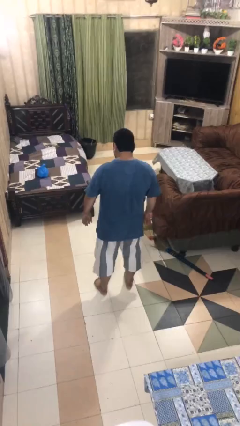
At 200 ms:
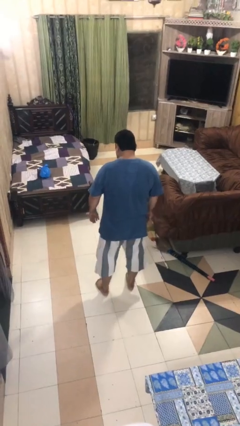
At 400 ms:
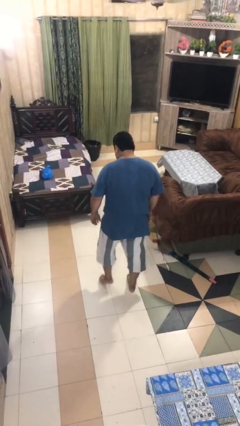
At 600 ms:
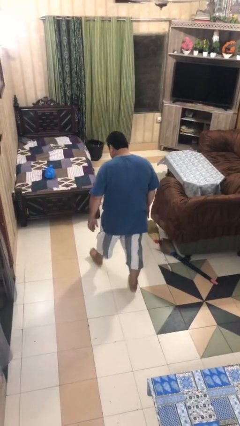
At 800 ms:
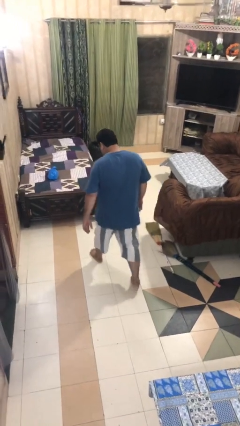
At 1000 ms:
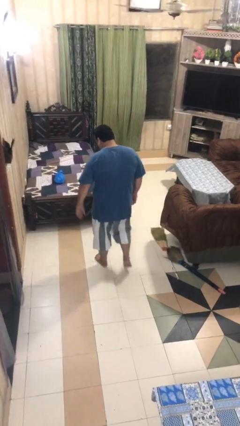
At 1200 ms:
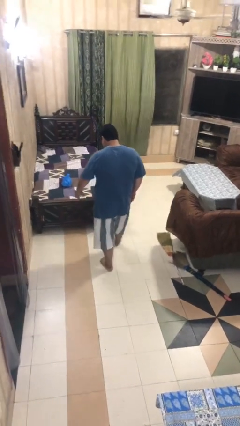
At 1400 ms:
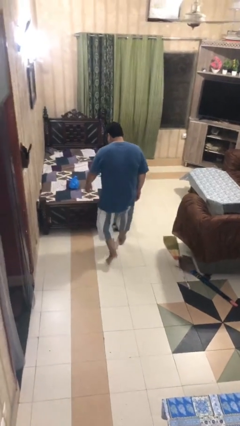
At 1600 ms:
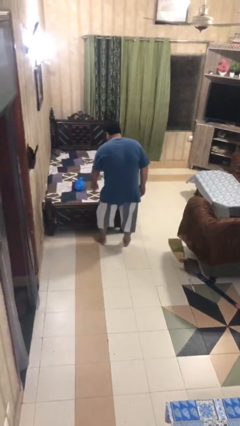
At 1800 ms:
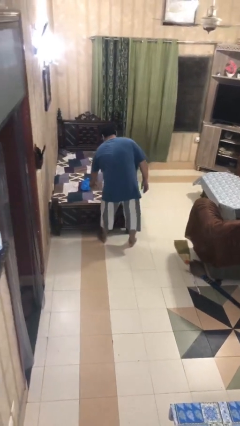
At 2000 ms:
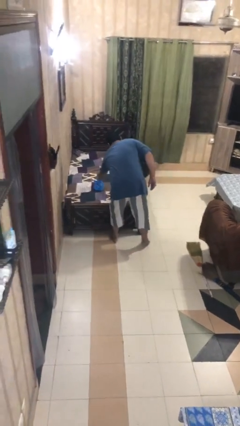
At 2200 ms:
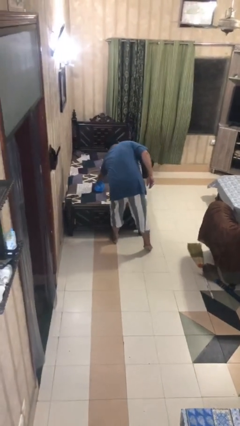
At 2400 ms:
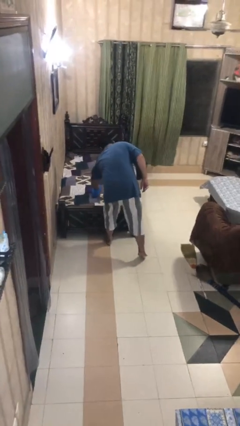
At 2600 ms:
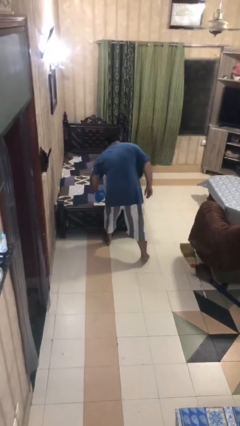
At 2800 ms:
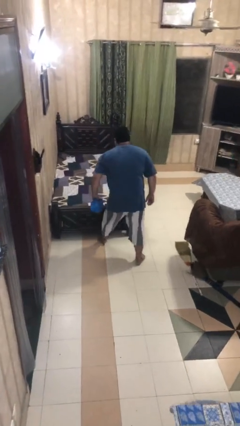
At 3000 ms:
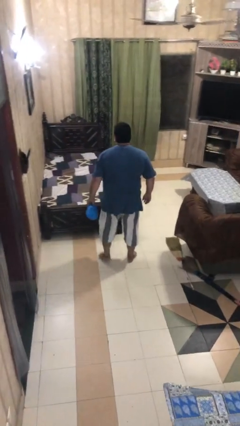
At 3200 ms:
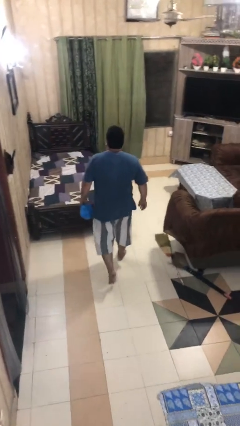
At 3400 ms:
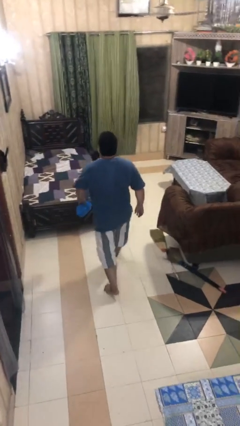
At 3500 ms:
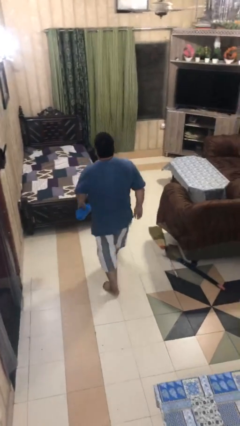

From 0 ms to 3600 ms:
person picks up object from bed

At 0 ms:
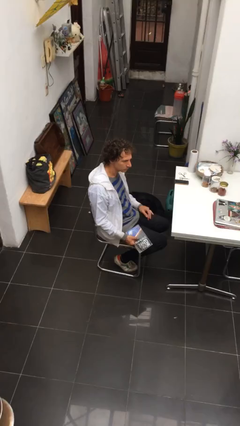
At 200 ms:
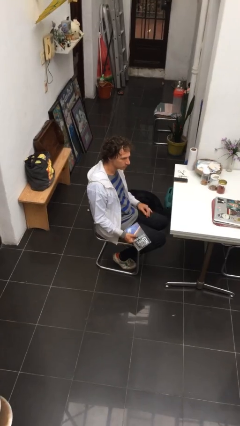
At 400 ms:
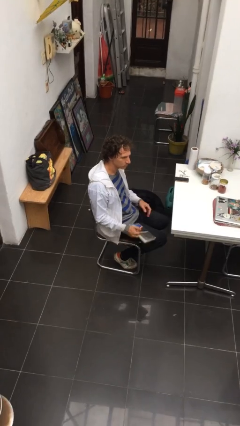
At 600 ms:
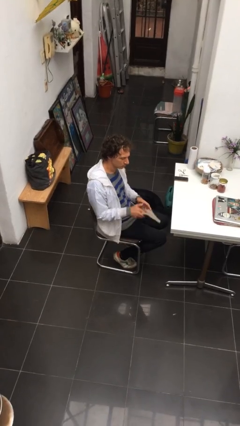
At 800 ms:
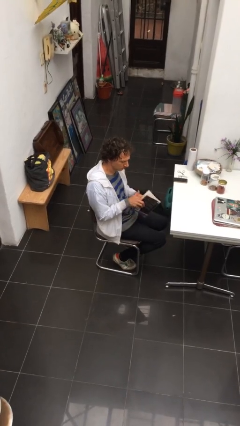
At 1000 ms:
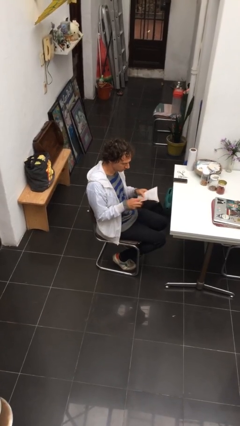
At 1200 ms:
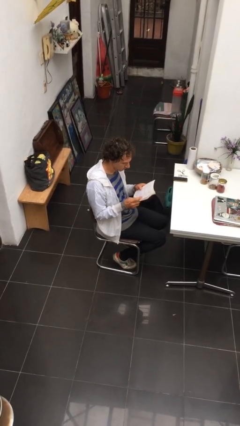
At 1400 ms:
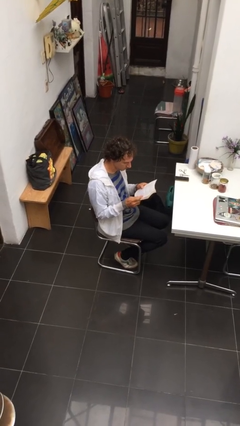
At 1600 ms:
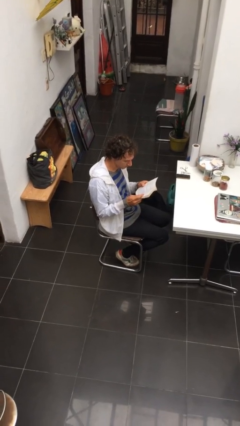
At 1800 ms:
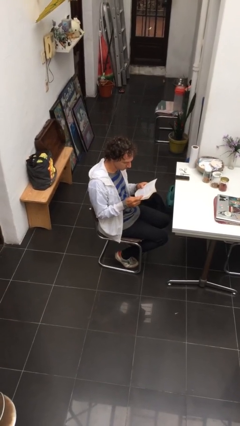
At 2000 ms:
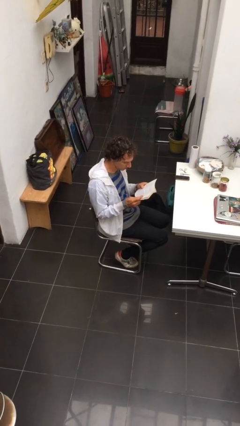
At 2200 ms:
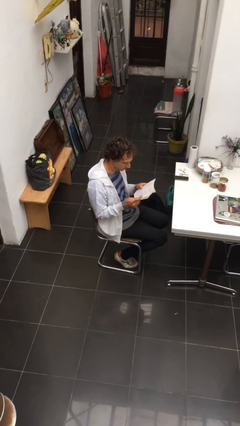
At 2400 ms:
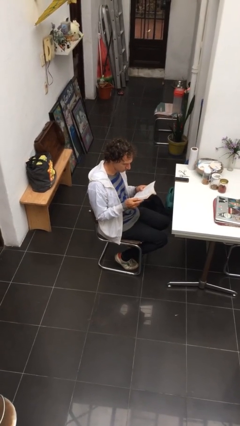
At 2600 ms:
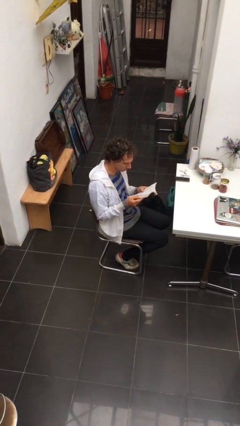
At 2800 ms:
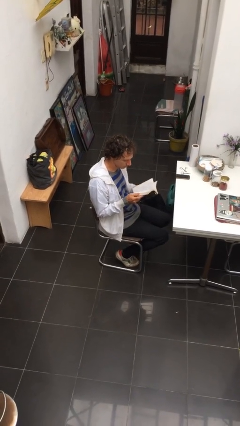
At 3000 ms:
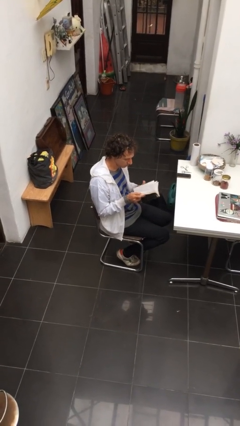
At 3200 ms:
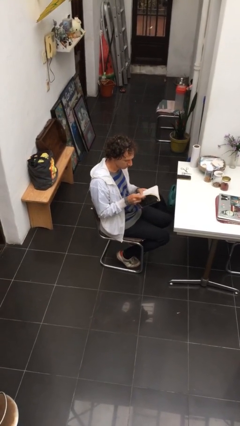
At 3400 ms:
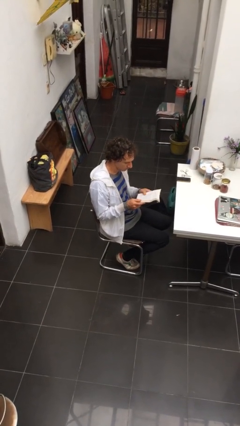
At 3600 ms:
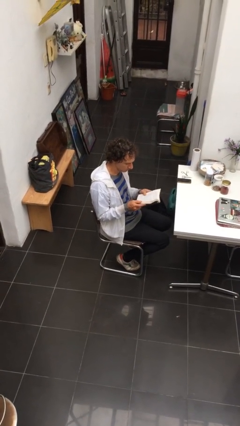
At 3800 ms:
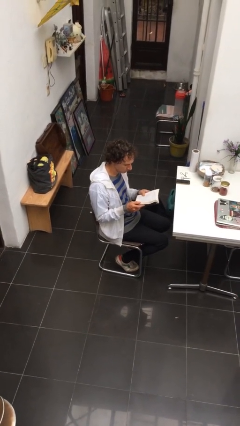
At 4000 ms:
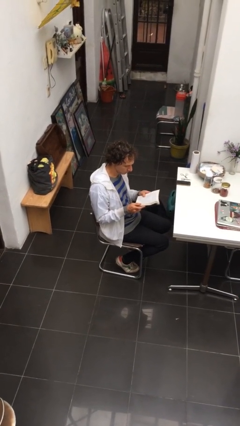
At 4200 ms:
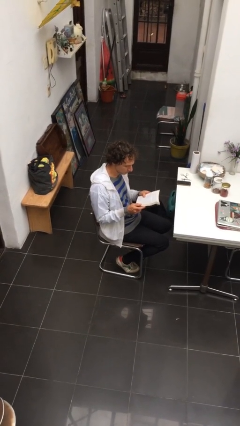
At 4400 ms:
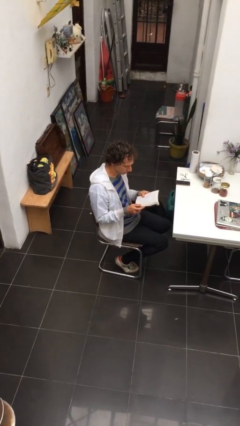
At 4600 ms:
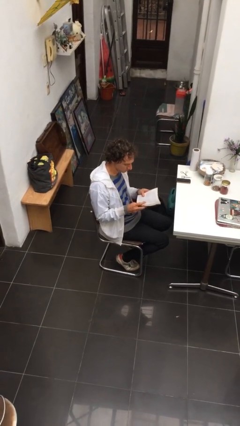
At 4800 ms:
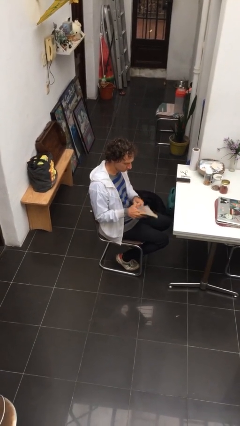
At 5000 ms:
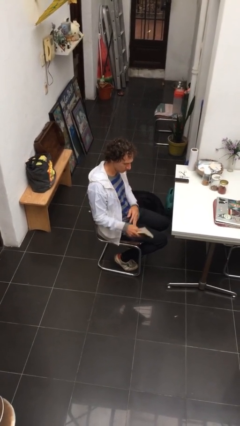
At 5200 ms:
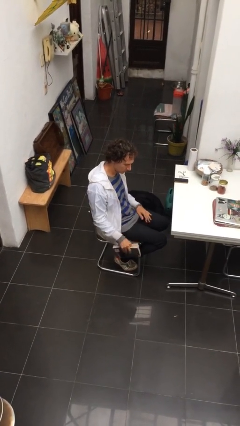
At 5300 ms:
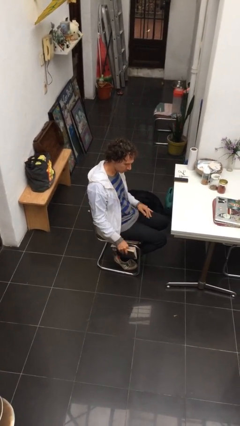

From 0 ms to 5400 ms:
person reads document

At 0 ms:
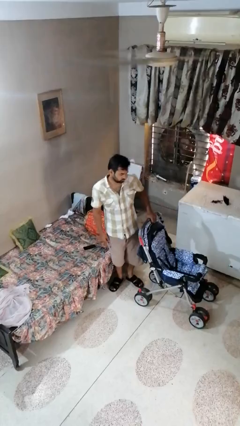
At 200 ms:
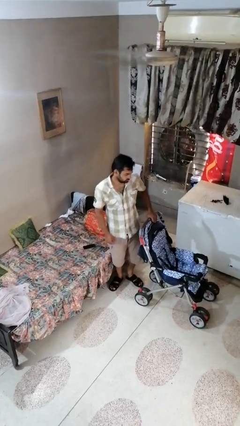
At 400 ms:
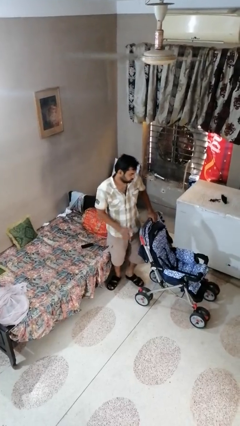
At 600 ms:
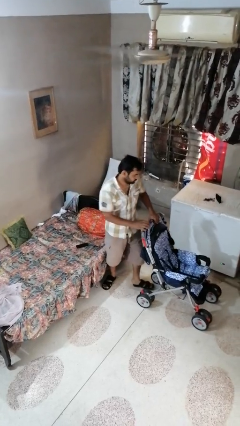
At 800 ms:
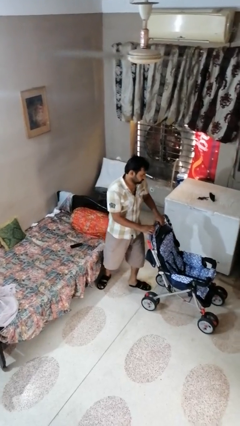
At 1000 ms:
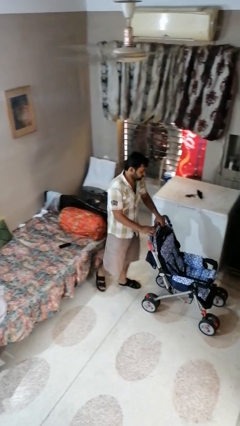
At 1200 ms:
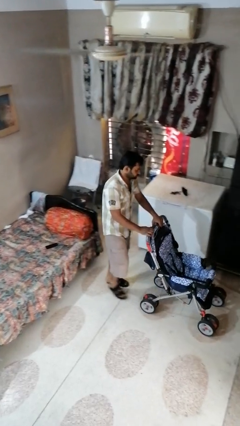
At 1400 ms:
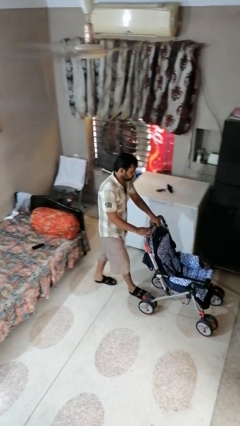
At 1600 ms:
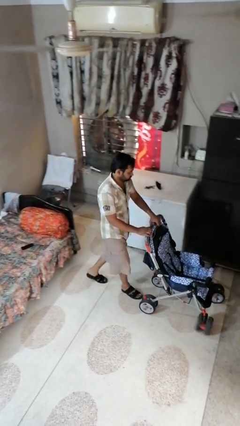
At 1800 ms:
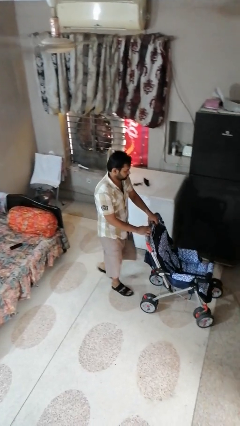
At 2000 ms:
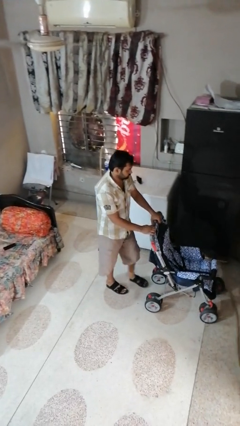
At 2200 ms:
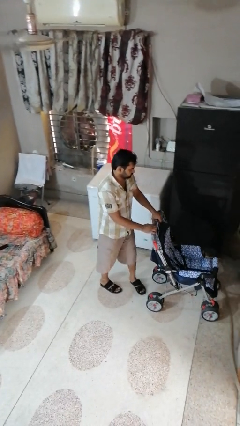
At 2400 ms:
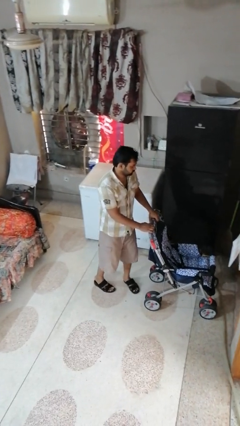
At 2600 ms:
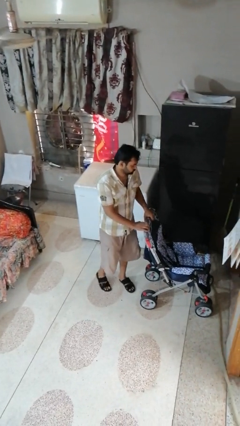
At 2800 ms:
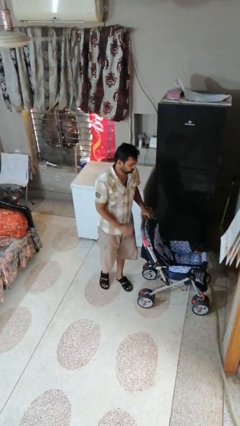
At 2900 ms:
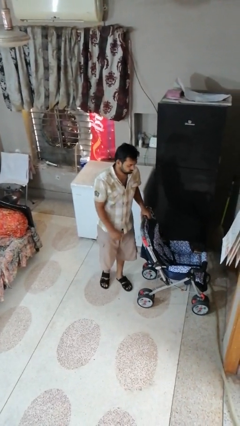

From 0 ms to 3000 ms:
person pushes wheeled cart

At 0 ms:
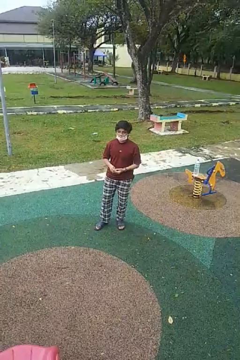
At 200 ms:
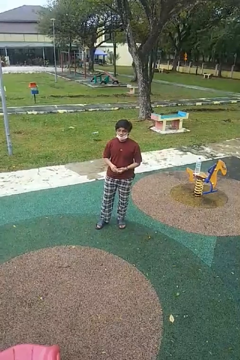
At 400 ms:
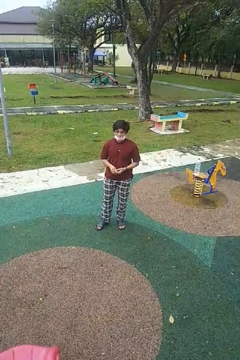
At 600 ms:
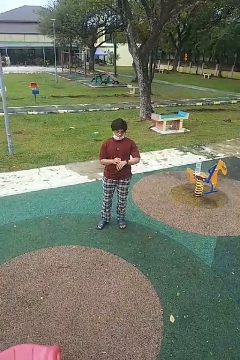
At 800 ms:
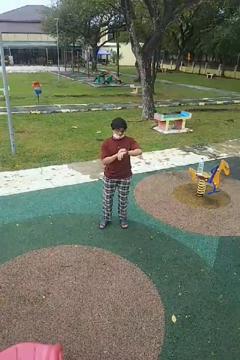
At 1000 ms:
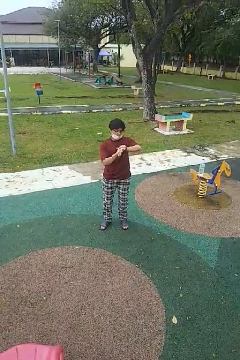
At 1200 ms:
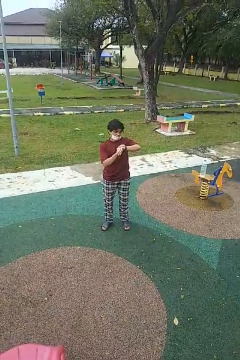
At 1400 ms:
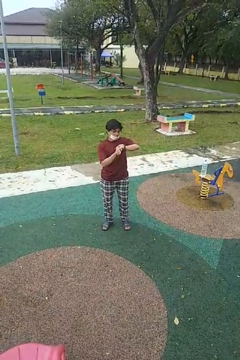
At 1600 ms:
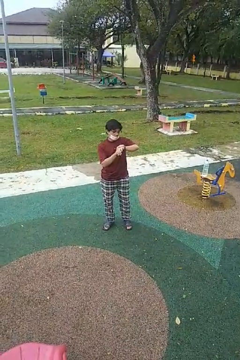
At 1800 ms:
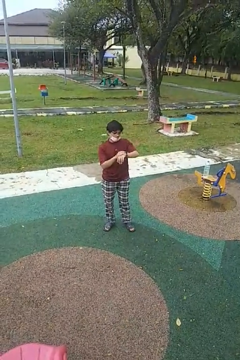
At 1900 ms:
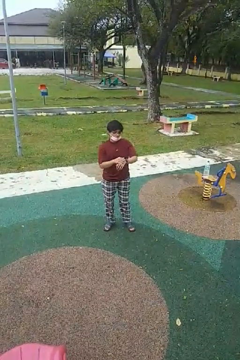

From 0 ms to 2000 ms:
person looks at wristwatch

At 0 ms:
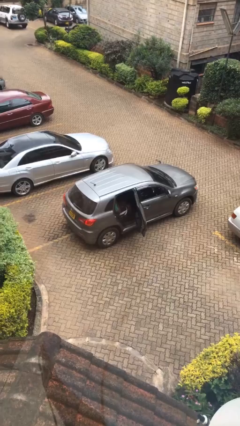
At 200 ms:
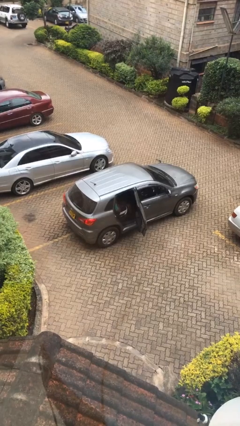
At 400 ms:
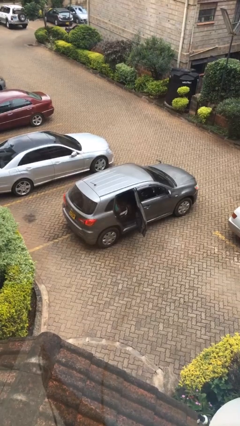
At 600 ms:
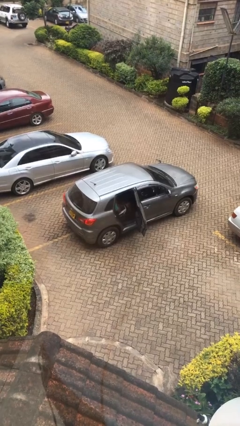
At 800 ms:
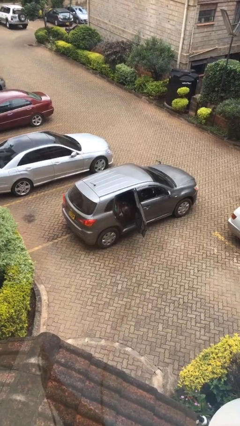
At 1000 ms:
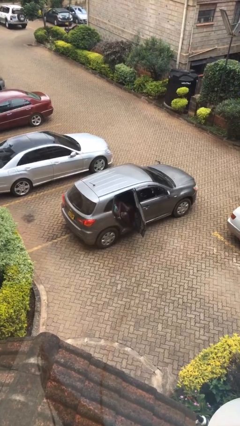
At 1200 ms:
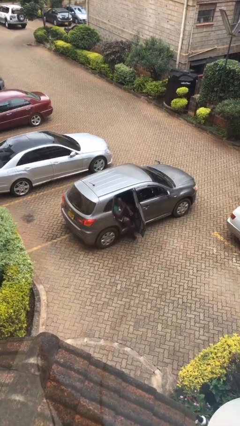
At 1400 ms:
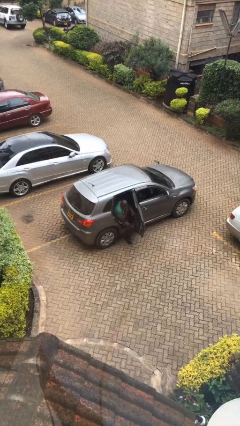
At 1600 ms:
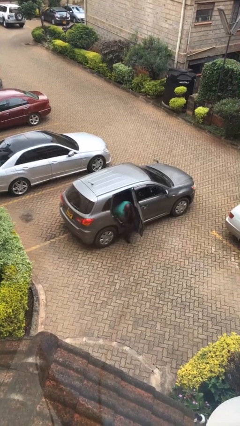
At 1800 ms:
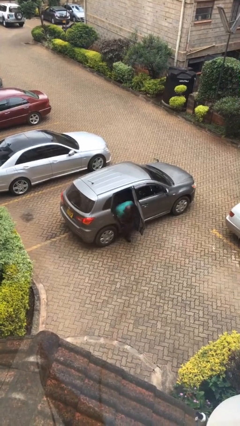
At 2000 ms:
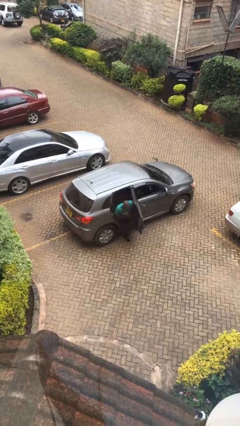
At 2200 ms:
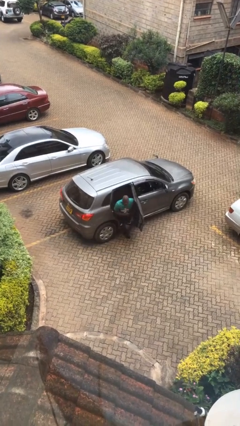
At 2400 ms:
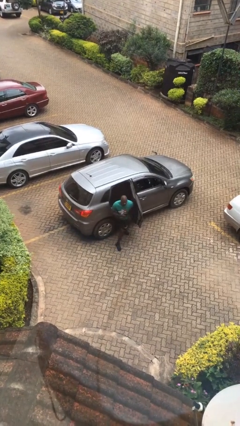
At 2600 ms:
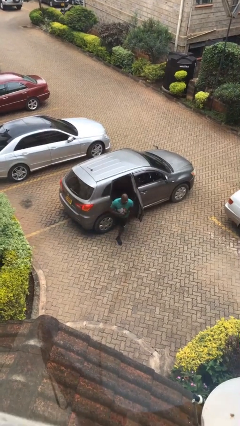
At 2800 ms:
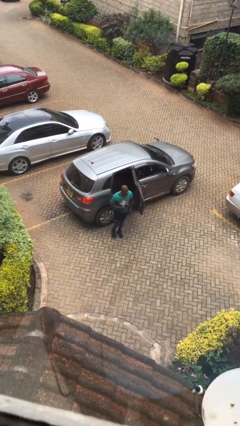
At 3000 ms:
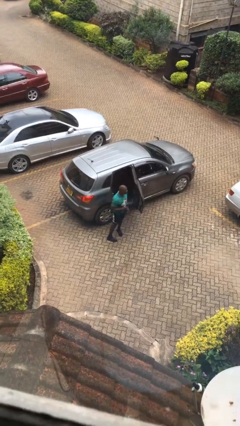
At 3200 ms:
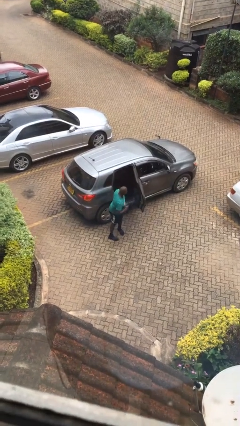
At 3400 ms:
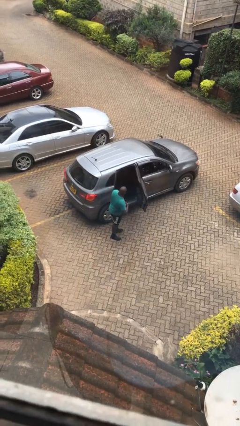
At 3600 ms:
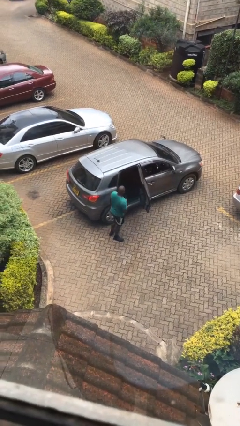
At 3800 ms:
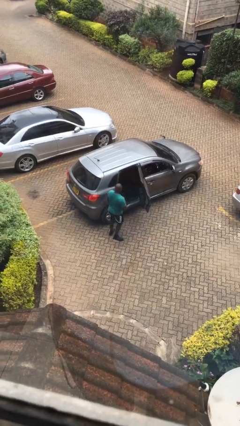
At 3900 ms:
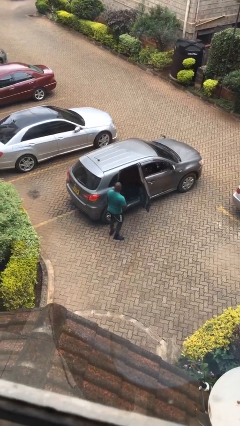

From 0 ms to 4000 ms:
person exits car

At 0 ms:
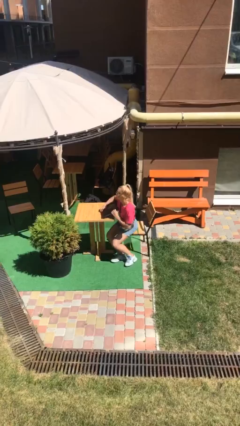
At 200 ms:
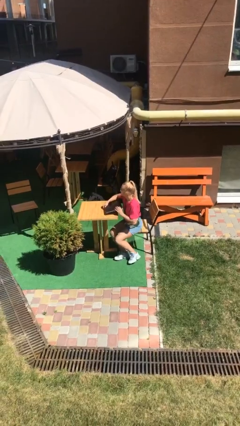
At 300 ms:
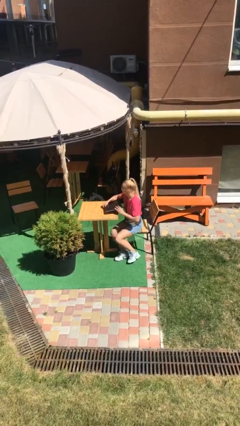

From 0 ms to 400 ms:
person sits down
